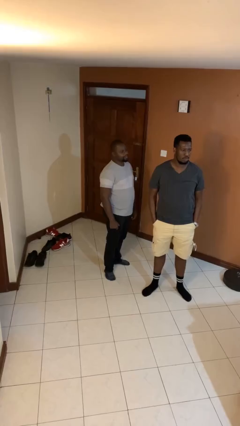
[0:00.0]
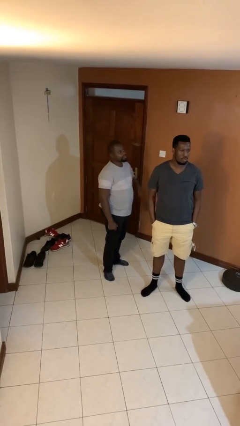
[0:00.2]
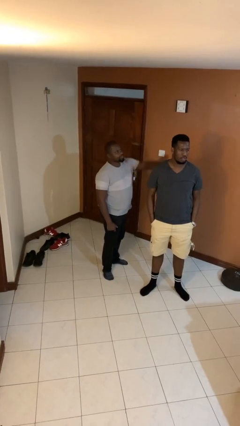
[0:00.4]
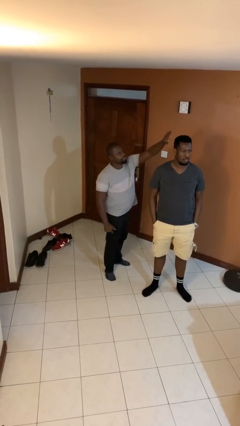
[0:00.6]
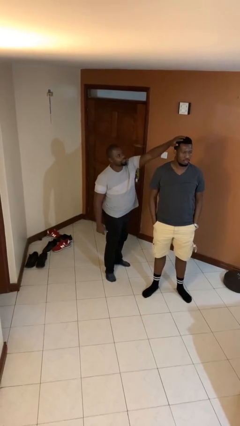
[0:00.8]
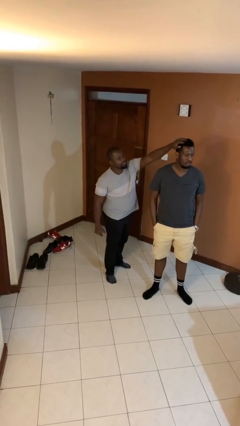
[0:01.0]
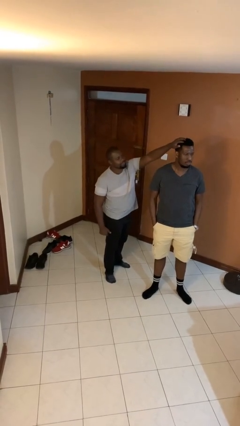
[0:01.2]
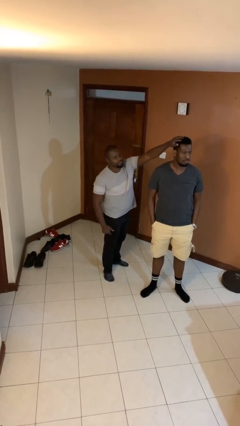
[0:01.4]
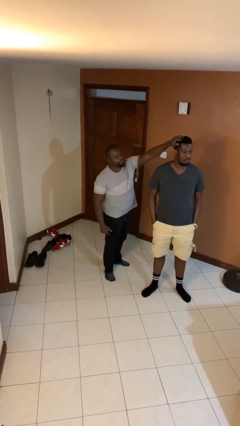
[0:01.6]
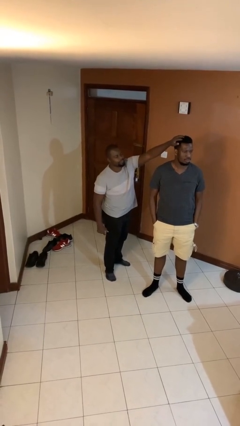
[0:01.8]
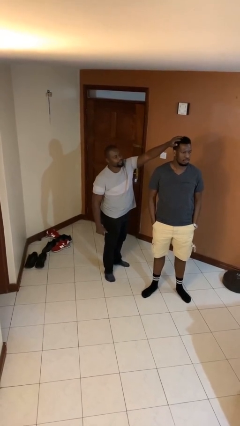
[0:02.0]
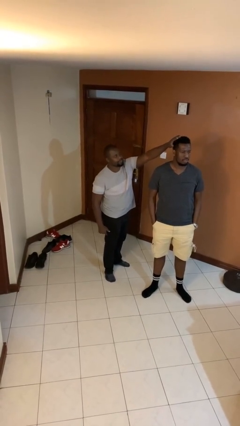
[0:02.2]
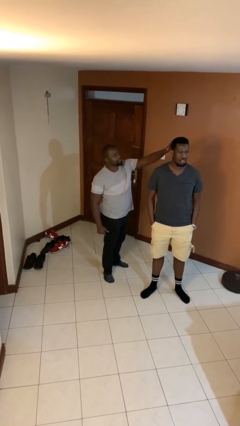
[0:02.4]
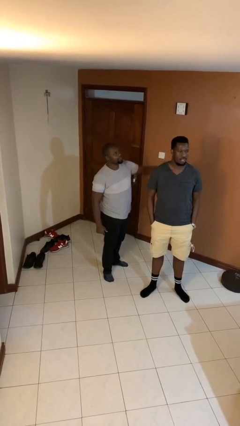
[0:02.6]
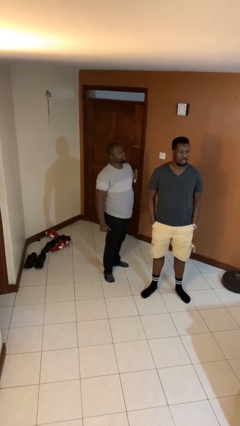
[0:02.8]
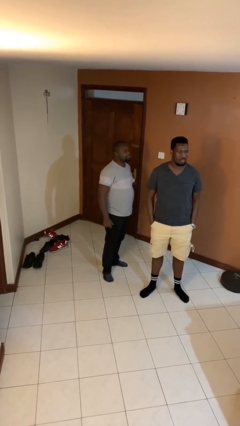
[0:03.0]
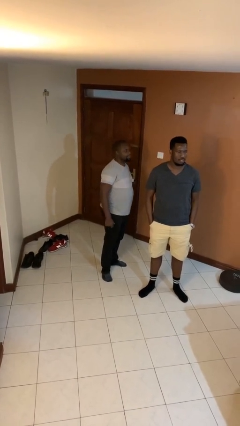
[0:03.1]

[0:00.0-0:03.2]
person grabs person by hair

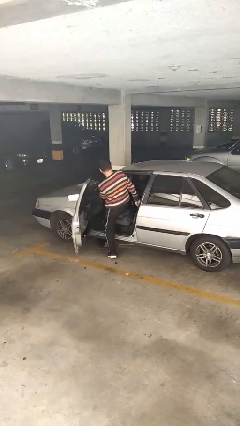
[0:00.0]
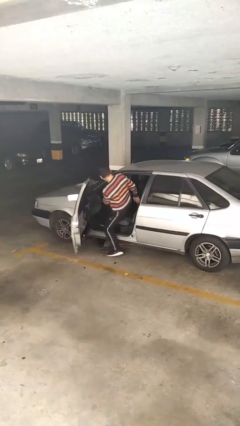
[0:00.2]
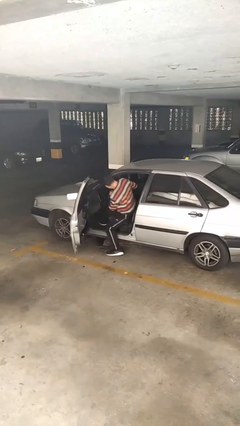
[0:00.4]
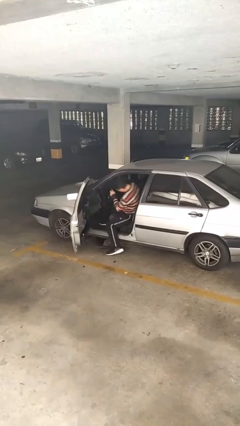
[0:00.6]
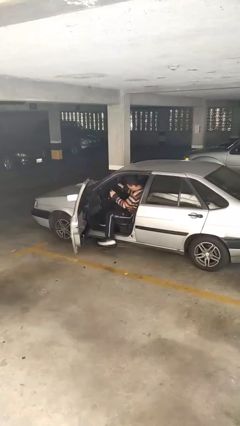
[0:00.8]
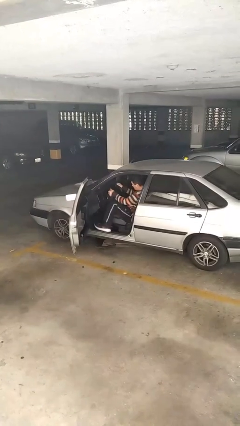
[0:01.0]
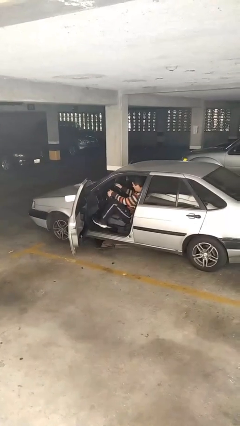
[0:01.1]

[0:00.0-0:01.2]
person enters car

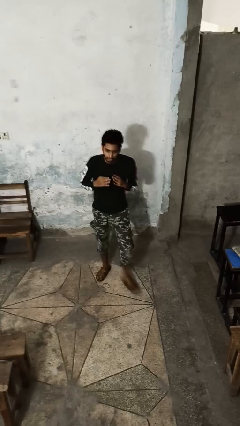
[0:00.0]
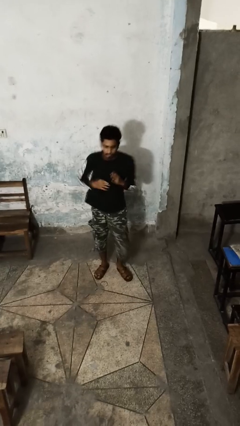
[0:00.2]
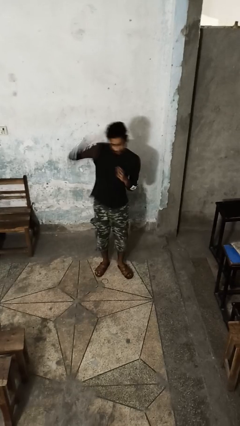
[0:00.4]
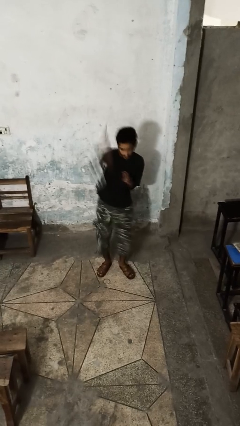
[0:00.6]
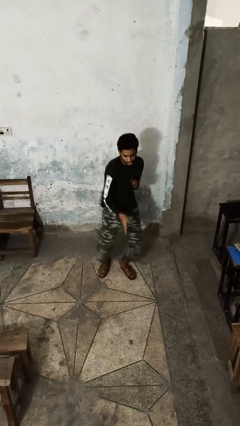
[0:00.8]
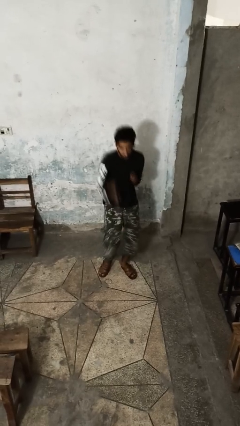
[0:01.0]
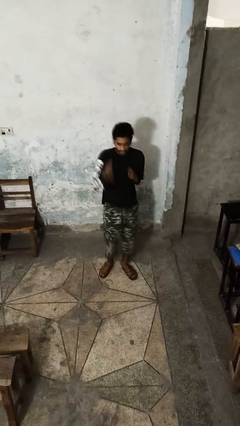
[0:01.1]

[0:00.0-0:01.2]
person karate chop

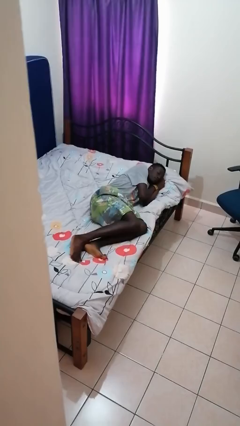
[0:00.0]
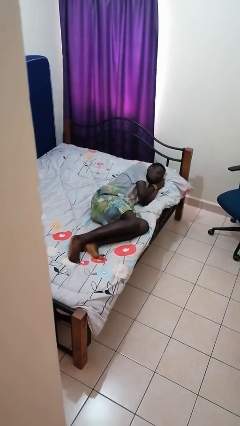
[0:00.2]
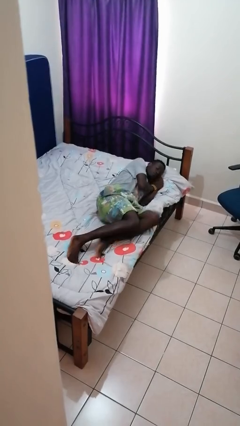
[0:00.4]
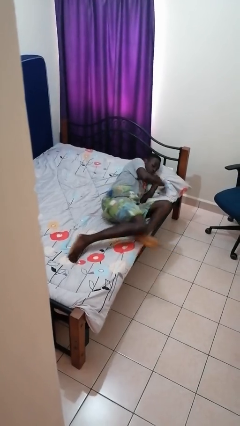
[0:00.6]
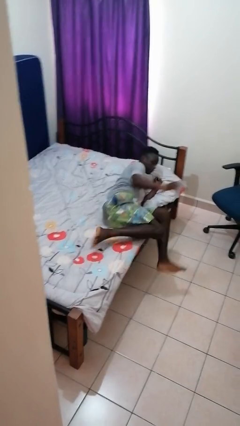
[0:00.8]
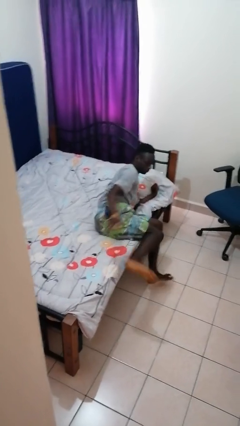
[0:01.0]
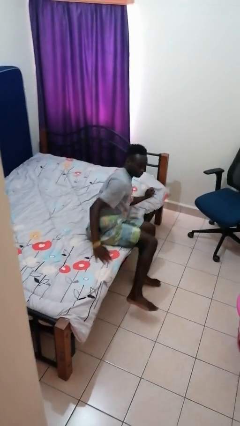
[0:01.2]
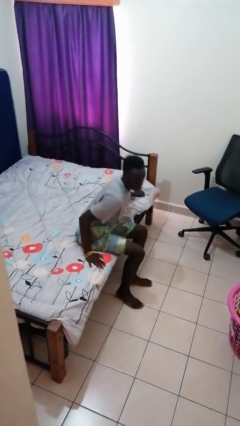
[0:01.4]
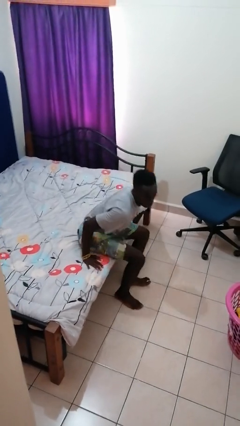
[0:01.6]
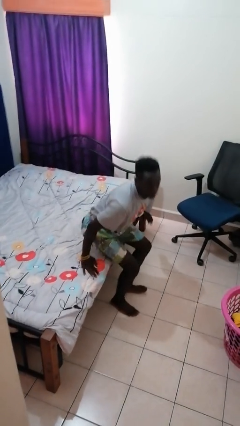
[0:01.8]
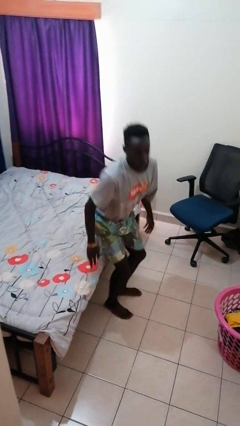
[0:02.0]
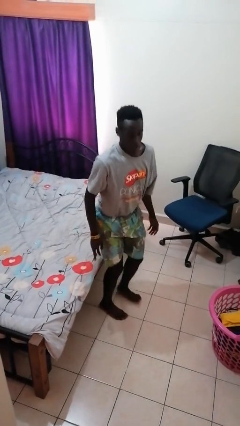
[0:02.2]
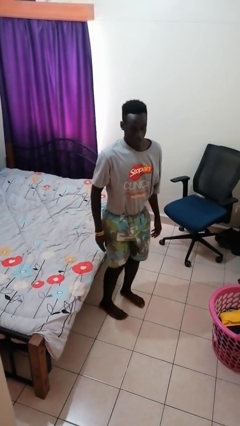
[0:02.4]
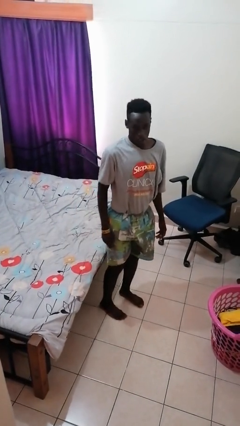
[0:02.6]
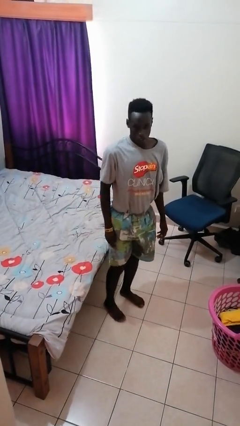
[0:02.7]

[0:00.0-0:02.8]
person stands up

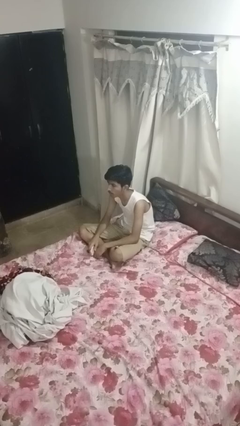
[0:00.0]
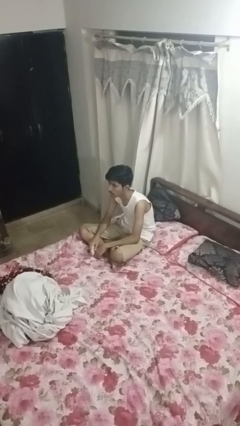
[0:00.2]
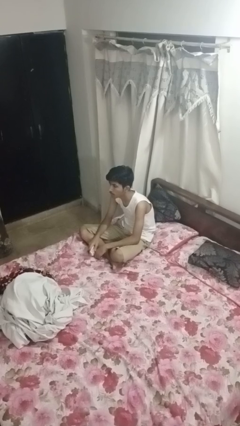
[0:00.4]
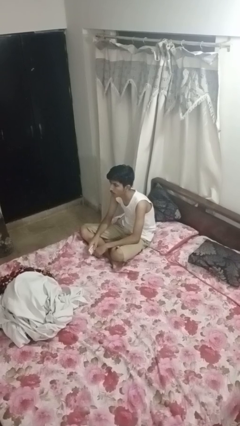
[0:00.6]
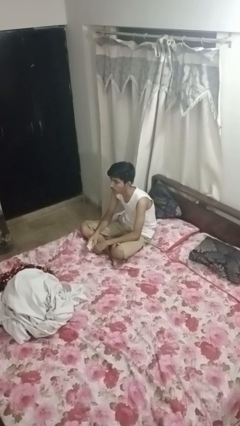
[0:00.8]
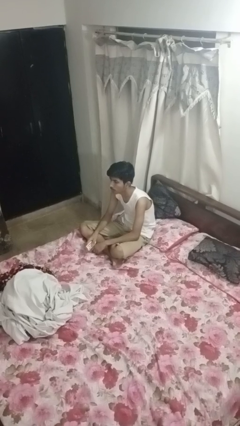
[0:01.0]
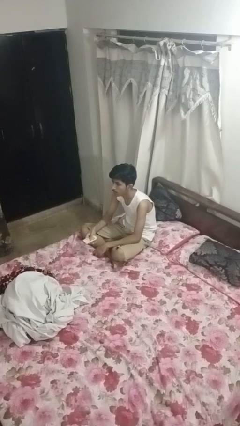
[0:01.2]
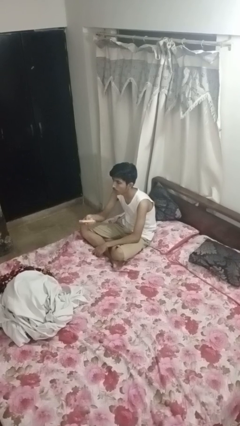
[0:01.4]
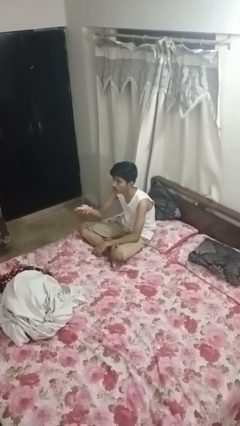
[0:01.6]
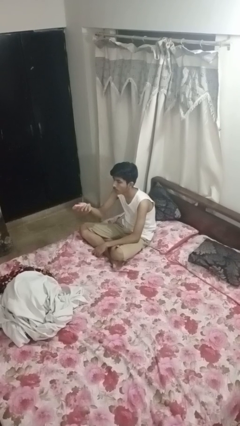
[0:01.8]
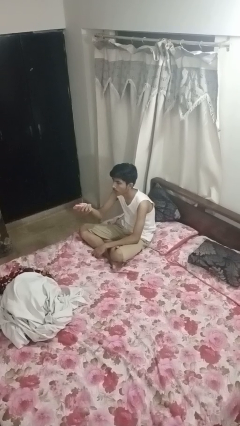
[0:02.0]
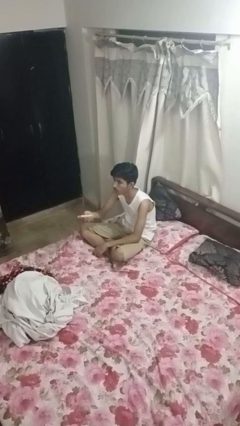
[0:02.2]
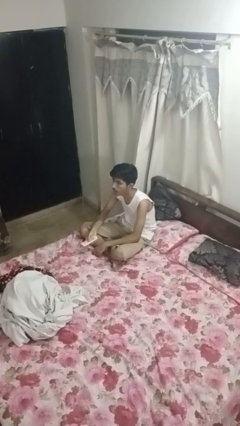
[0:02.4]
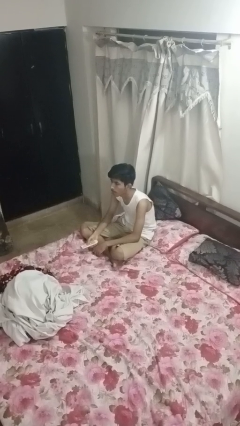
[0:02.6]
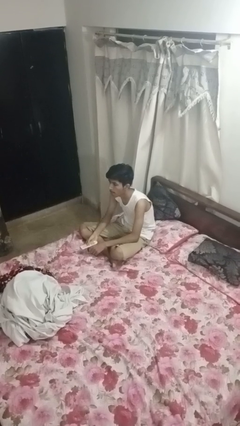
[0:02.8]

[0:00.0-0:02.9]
person uses television remote

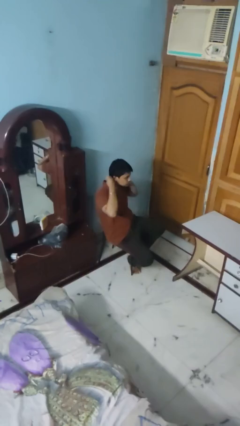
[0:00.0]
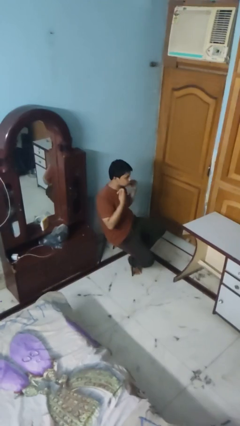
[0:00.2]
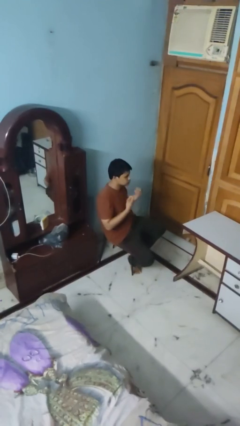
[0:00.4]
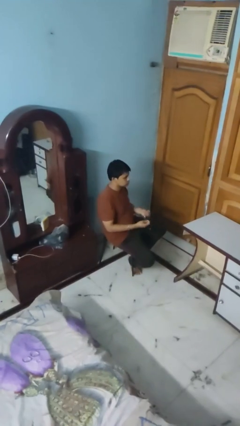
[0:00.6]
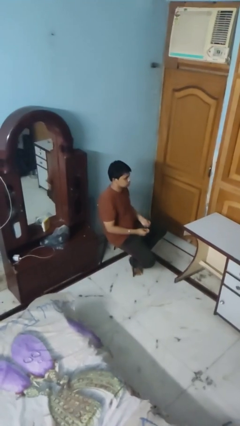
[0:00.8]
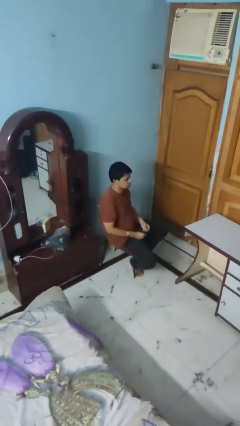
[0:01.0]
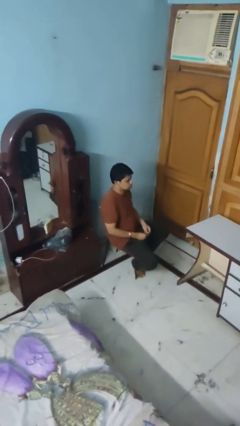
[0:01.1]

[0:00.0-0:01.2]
person takes off necklace

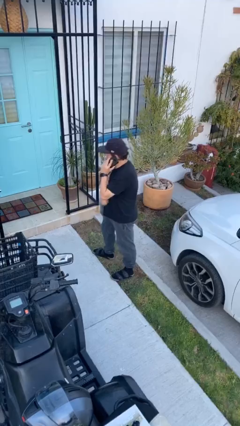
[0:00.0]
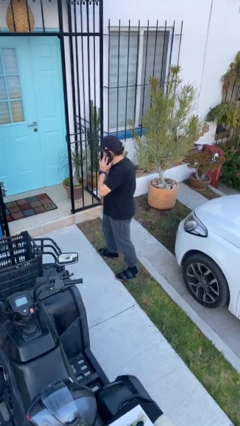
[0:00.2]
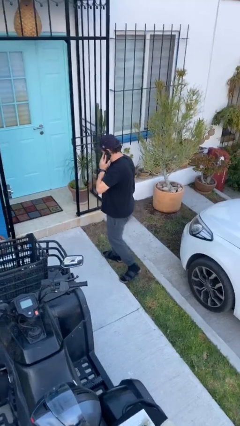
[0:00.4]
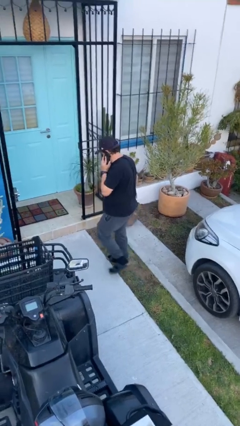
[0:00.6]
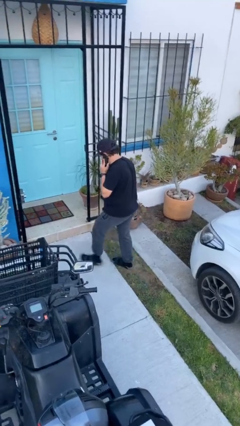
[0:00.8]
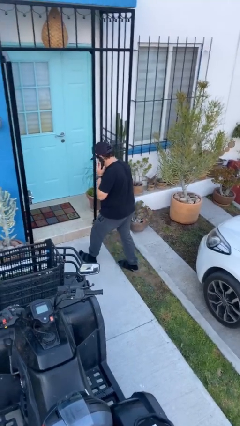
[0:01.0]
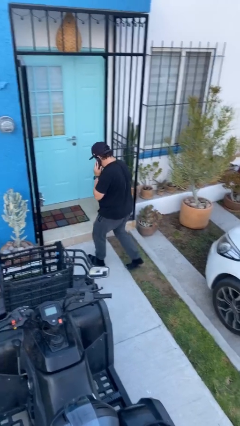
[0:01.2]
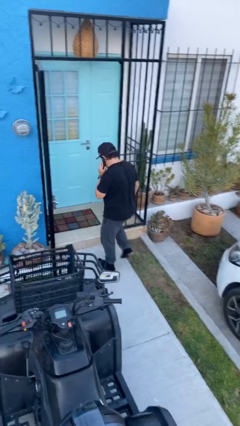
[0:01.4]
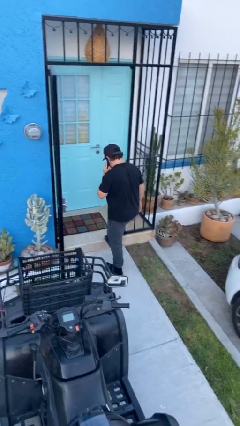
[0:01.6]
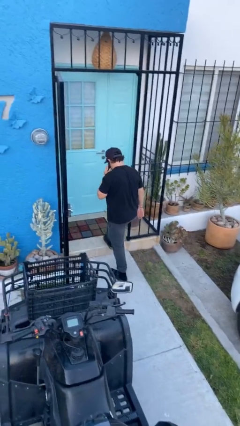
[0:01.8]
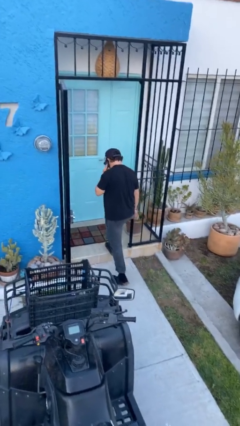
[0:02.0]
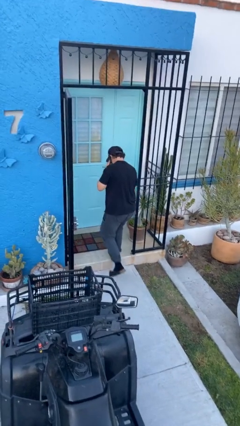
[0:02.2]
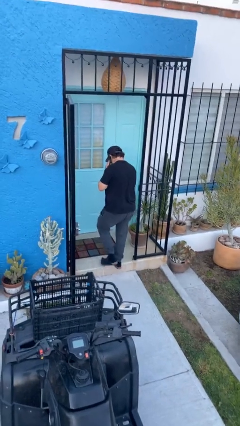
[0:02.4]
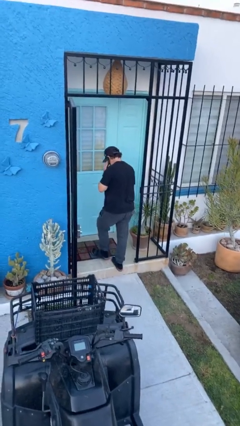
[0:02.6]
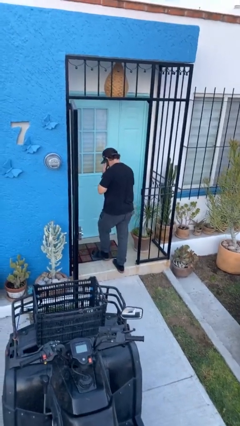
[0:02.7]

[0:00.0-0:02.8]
person exits scene through structure

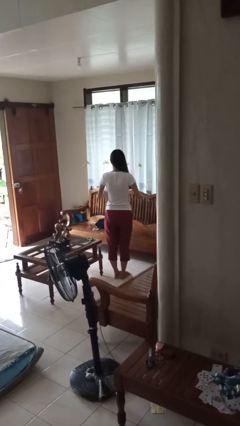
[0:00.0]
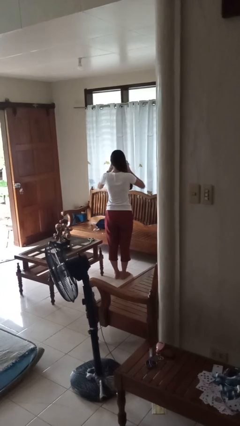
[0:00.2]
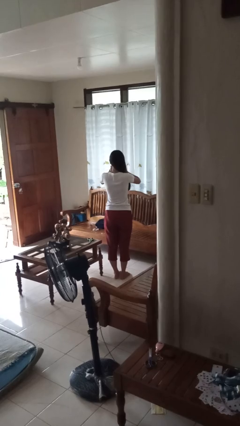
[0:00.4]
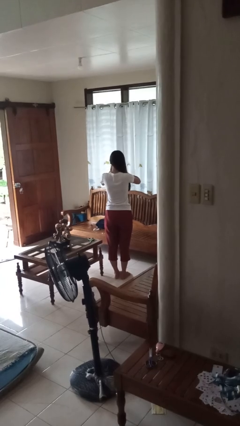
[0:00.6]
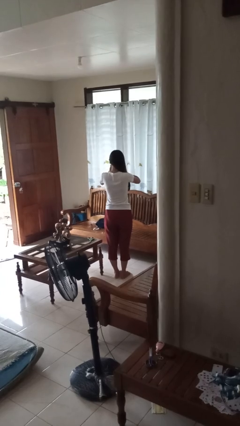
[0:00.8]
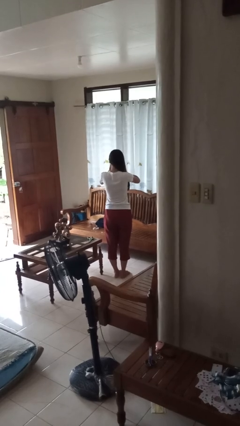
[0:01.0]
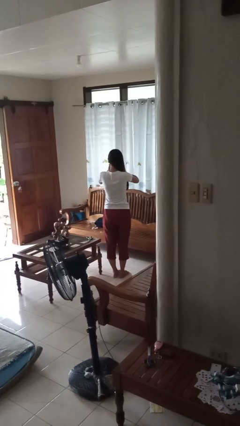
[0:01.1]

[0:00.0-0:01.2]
person covers face with hands

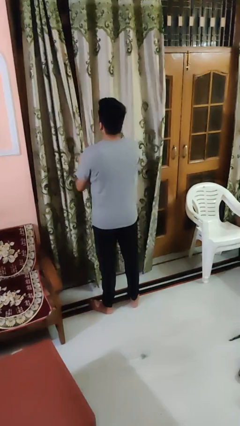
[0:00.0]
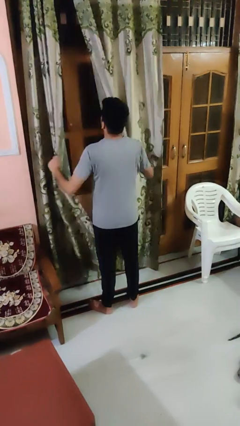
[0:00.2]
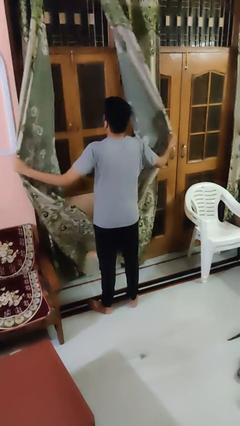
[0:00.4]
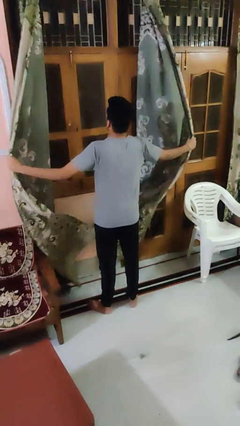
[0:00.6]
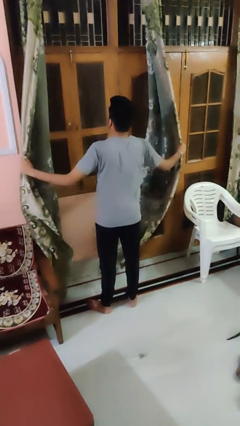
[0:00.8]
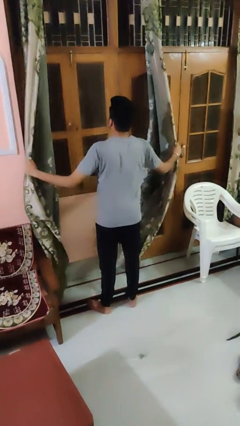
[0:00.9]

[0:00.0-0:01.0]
person opens curtains
